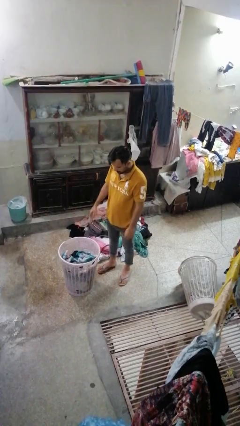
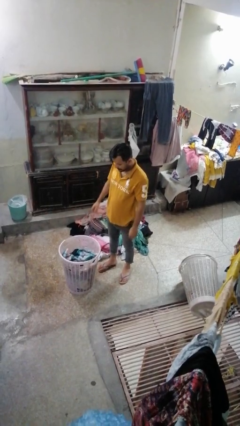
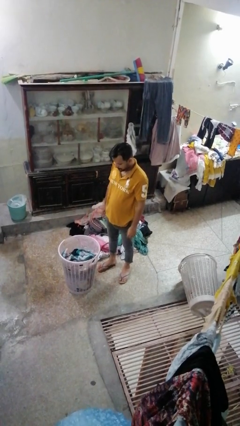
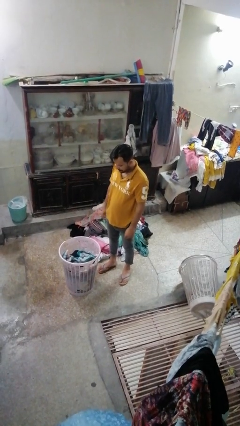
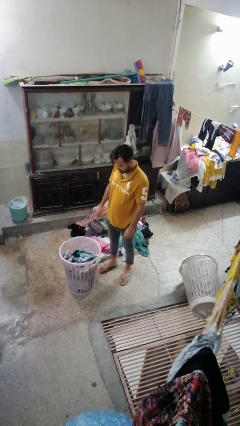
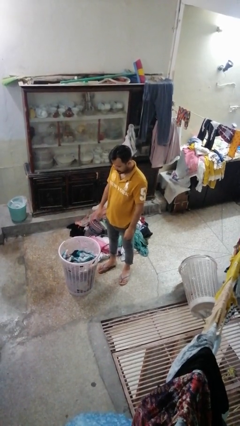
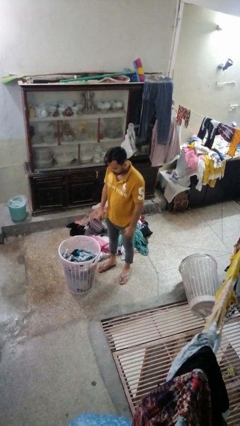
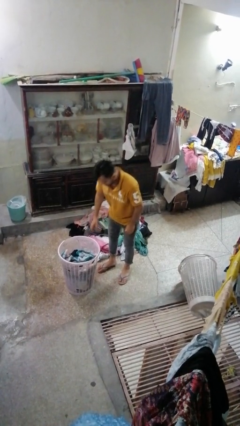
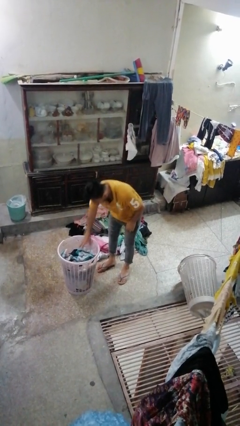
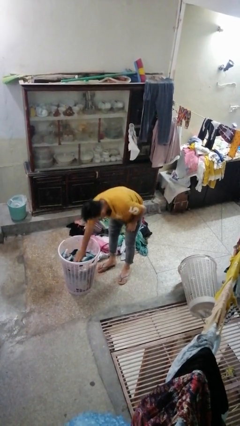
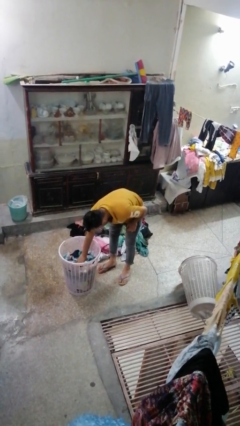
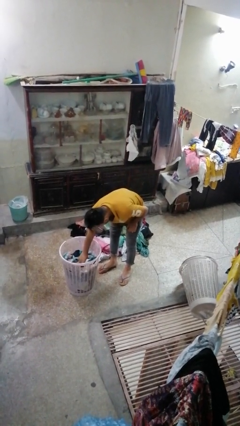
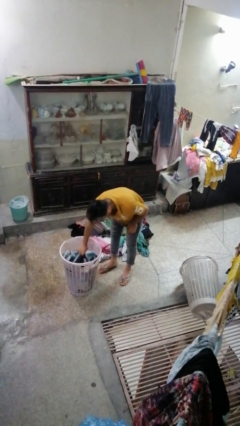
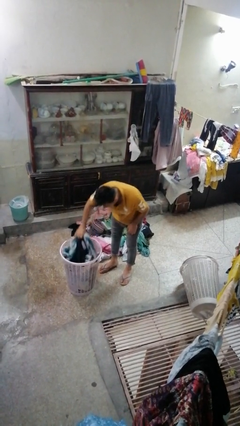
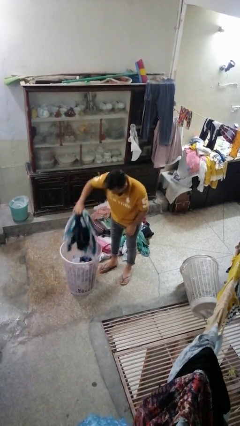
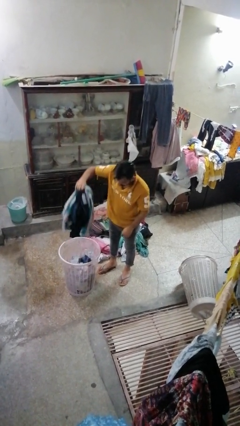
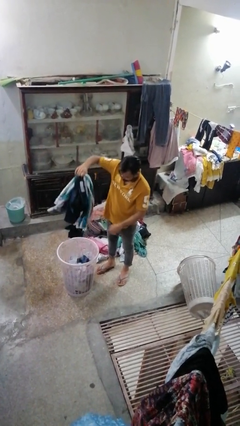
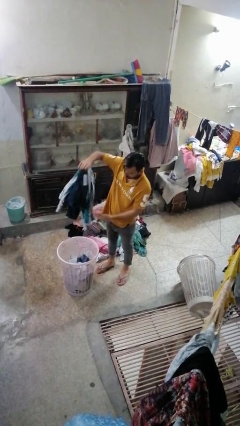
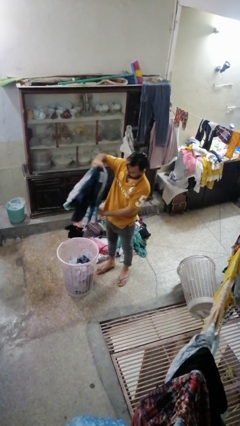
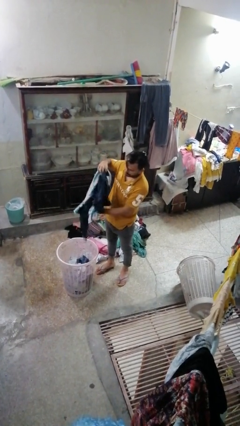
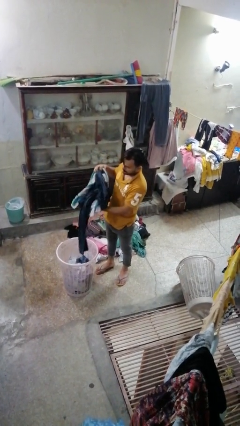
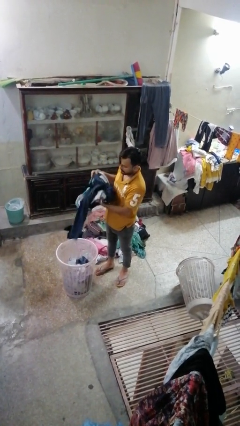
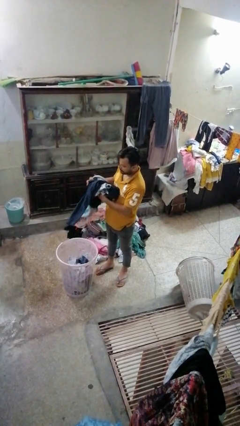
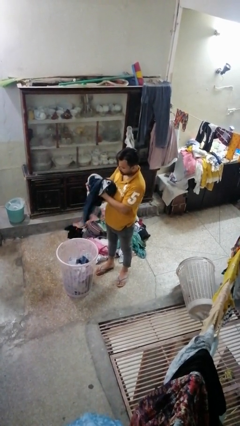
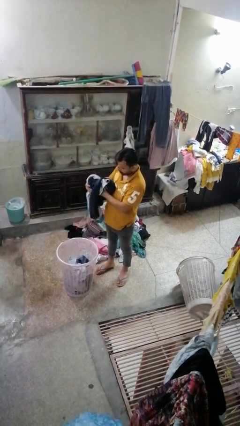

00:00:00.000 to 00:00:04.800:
person takes object from basket

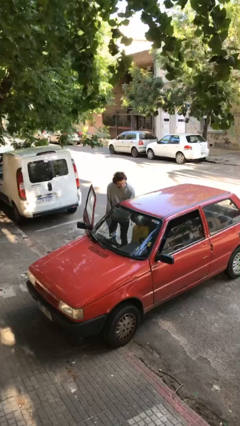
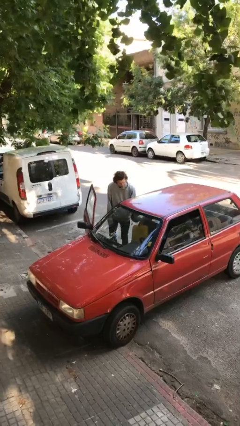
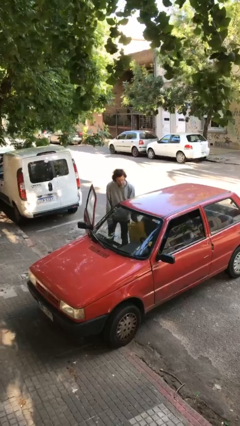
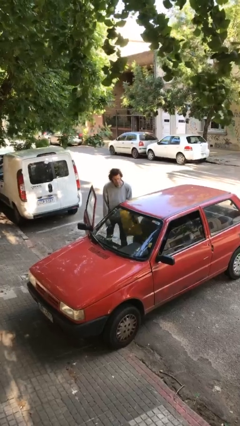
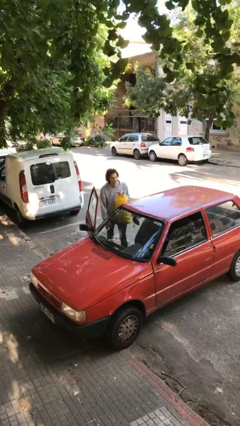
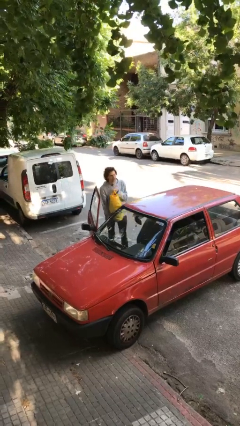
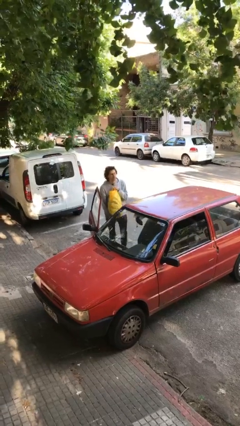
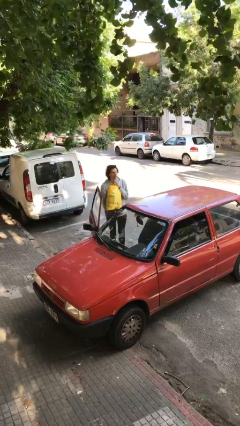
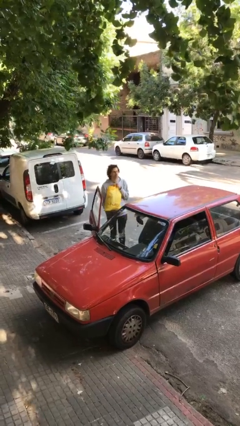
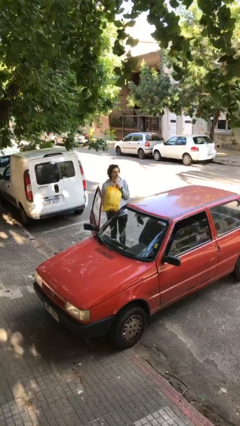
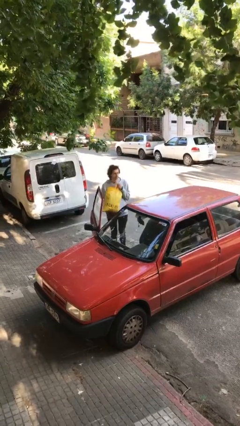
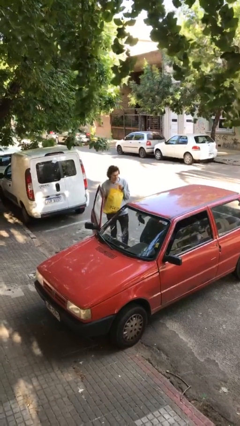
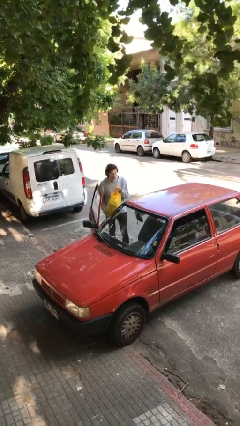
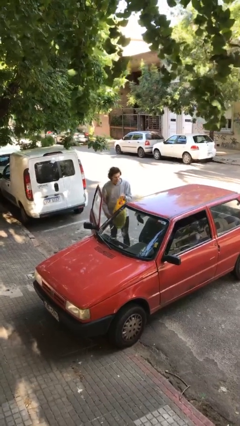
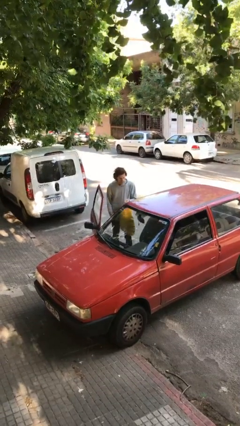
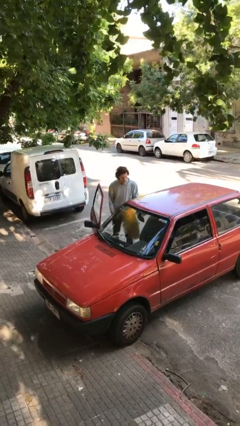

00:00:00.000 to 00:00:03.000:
person unloads car

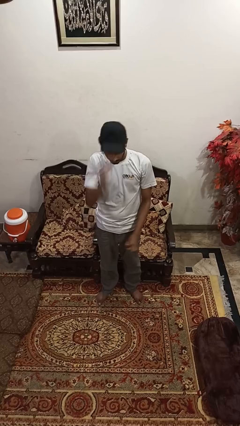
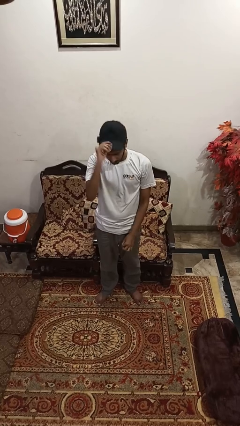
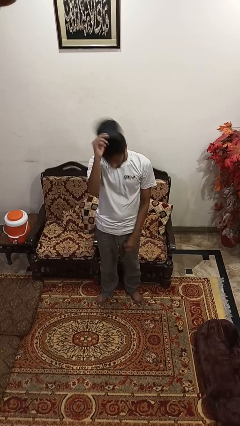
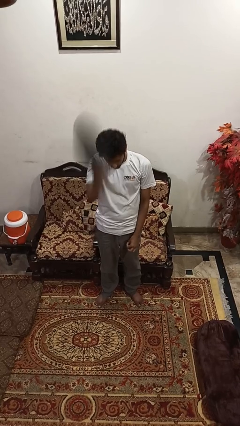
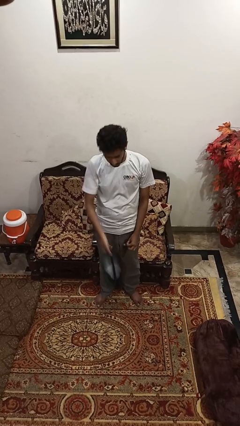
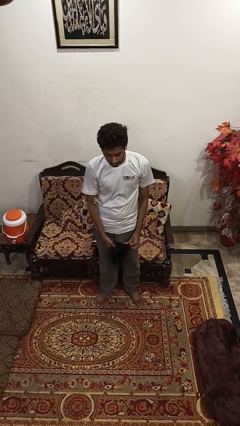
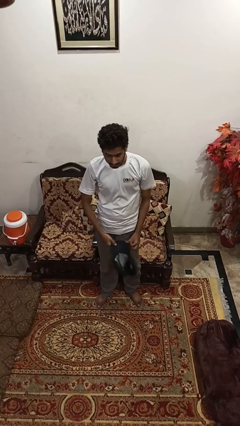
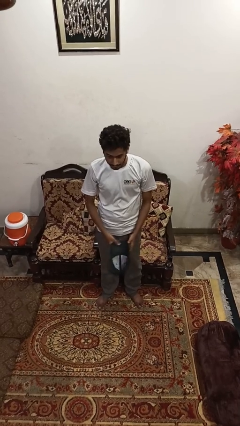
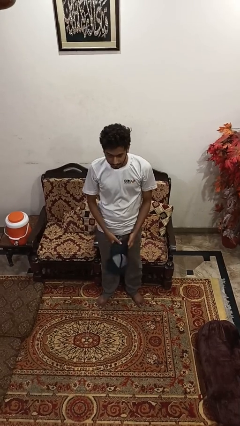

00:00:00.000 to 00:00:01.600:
person takes off hat

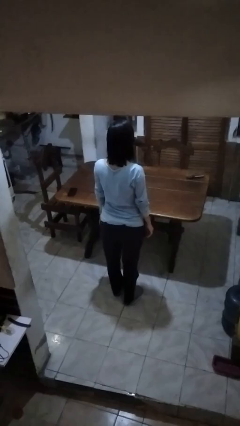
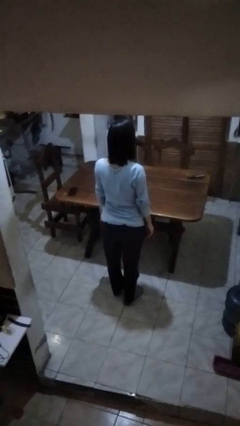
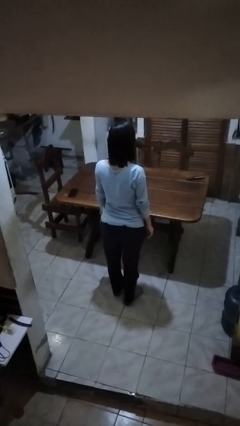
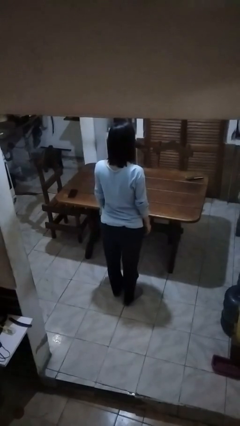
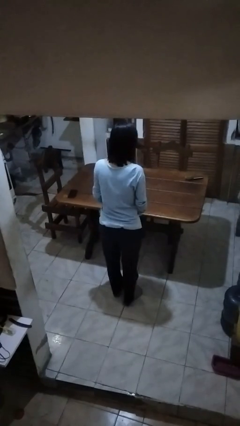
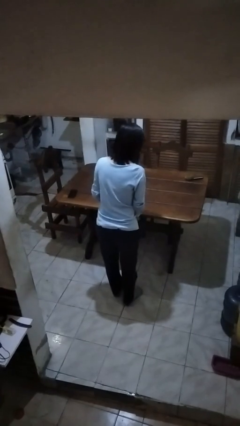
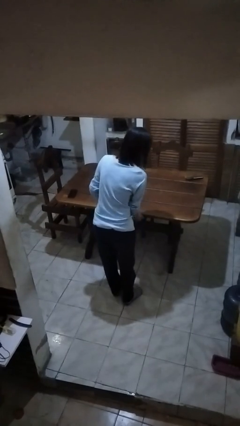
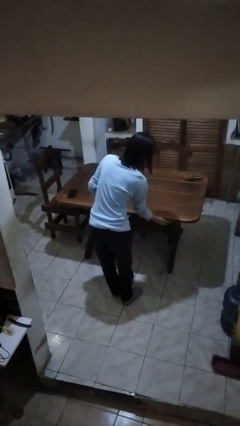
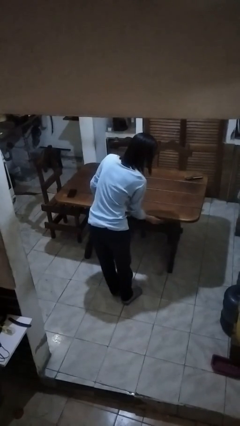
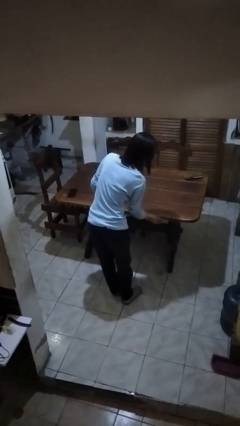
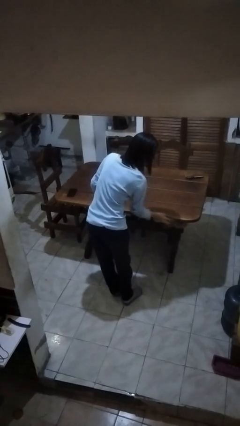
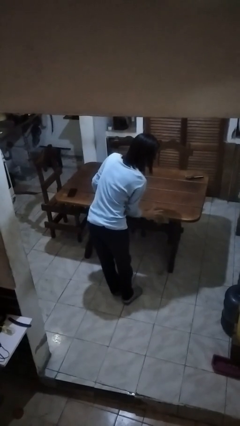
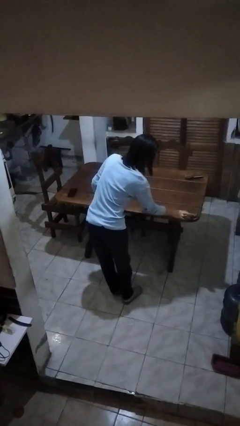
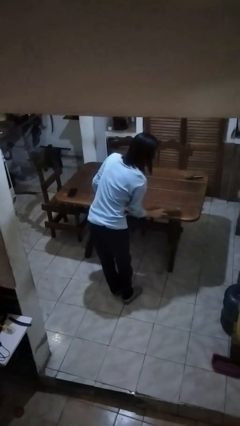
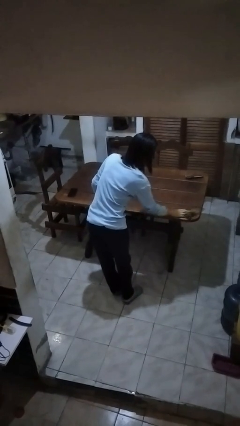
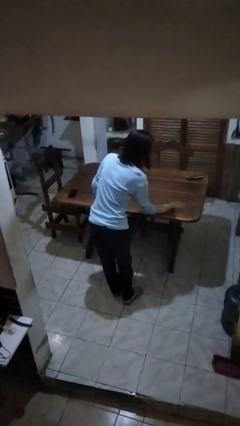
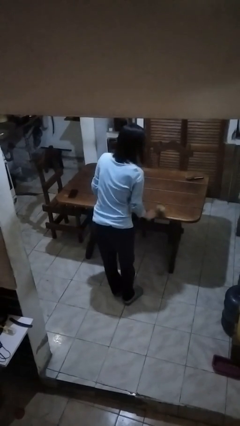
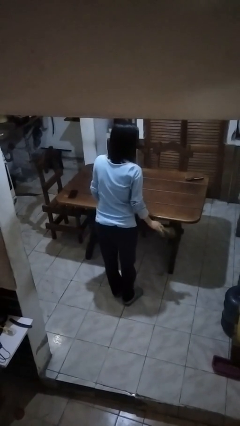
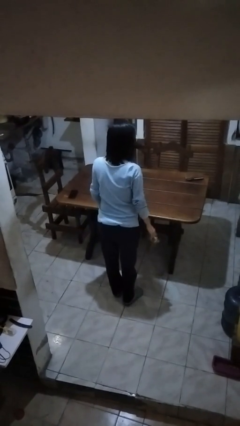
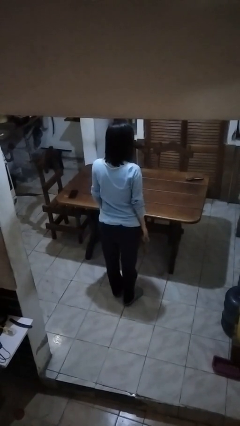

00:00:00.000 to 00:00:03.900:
person cleans table with rag

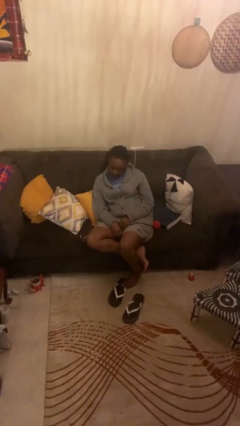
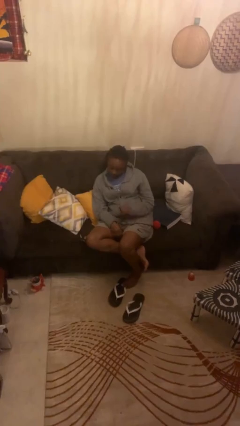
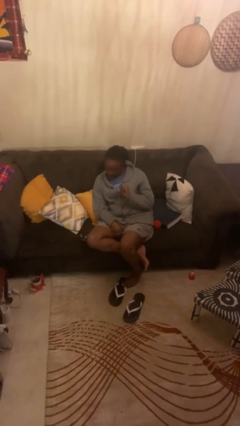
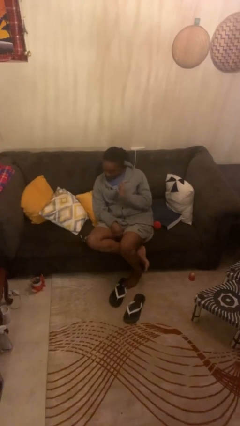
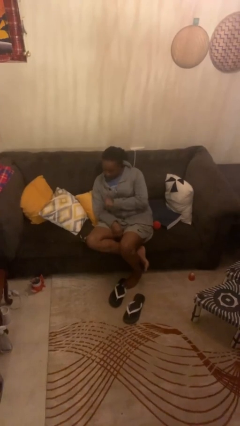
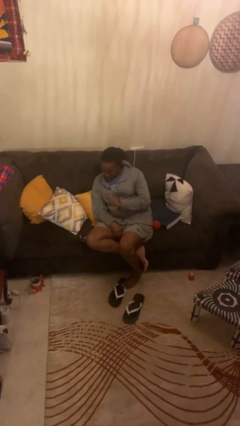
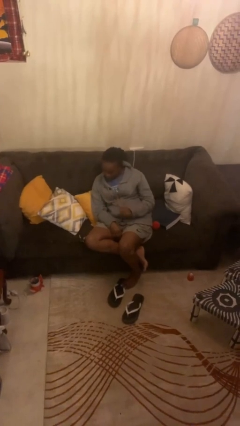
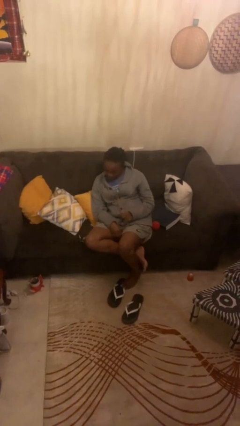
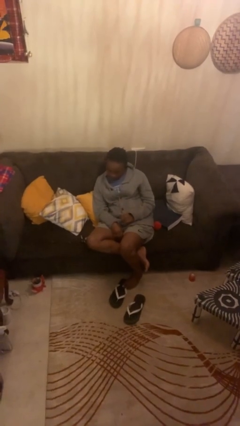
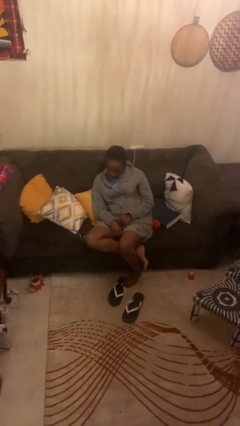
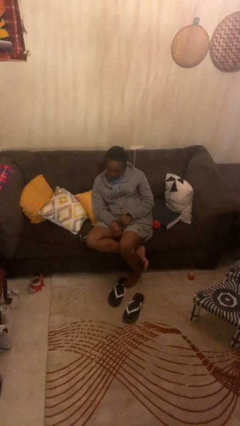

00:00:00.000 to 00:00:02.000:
person swats bug

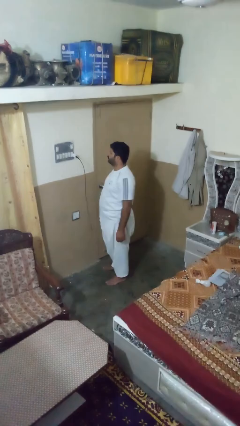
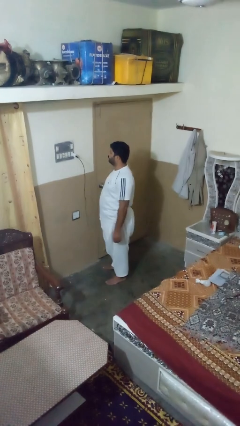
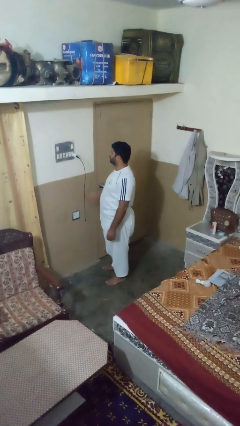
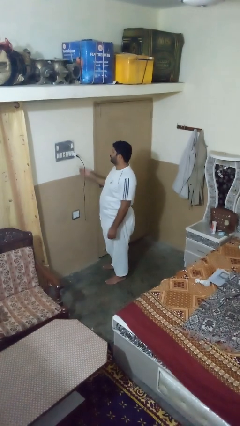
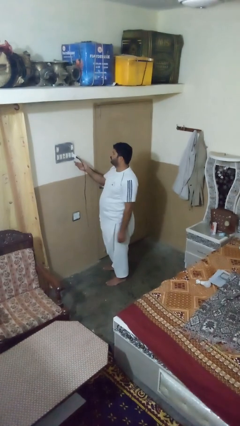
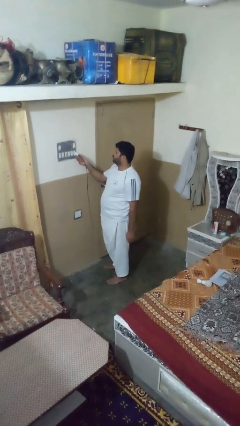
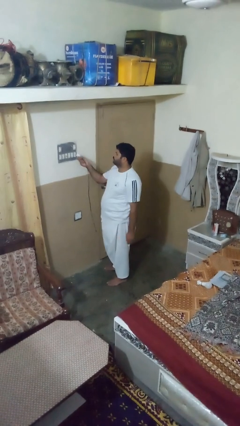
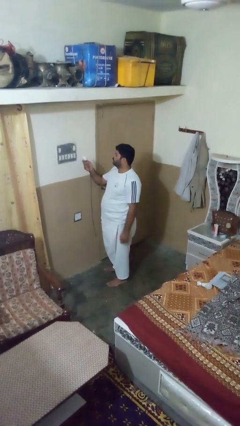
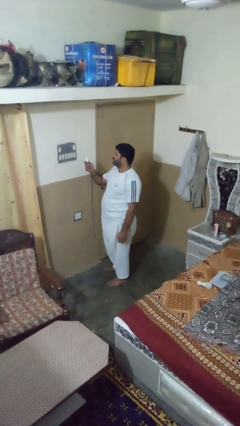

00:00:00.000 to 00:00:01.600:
person unplugs from electrical socket

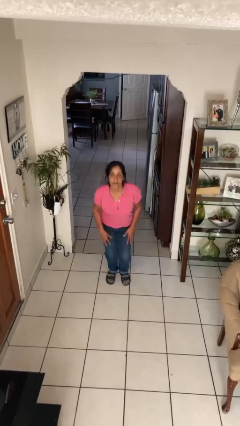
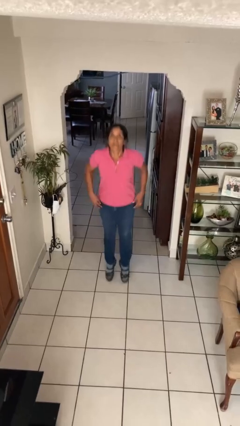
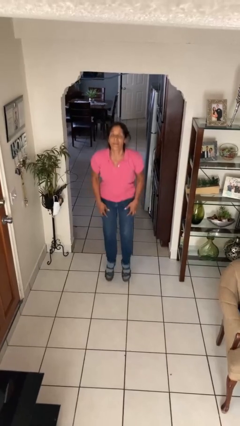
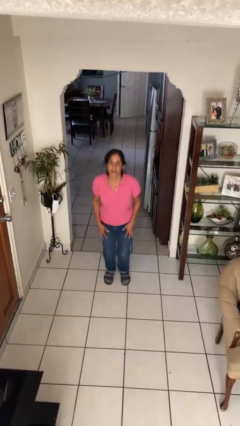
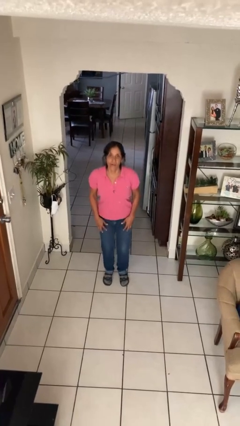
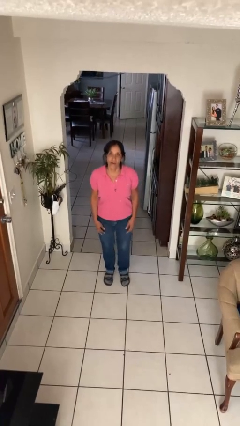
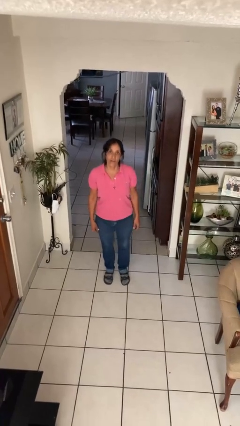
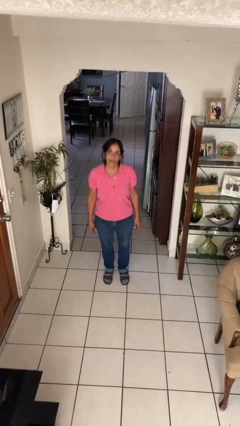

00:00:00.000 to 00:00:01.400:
person jumps
